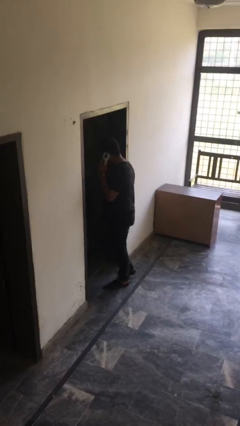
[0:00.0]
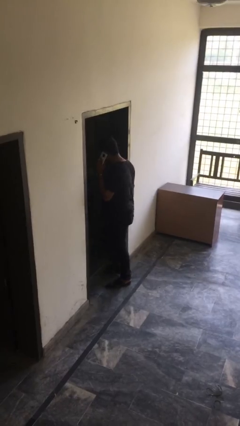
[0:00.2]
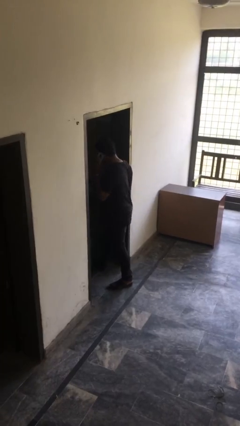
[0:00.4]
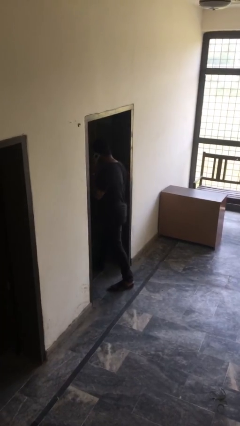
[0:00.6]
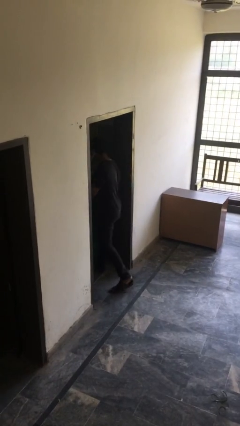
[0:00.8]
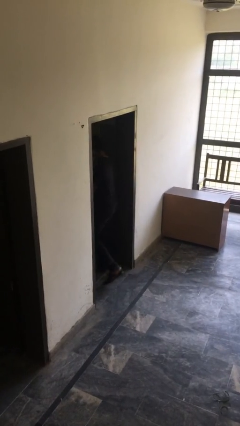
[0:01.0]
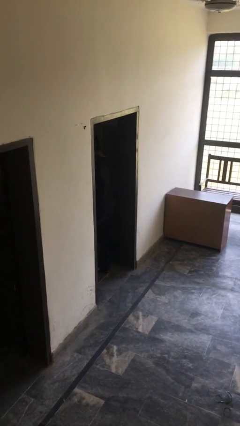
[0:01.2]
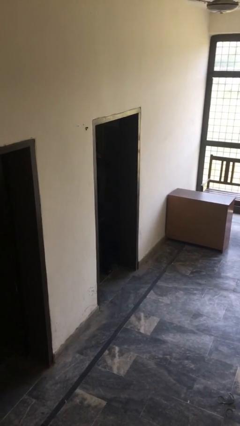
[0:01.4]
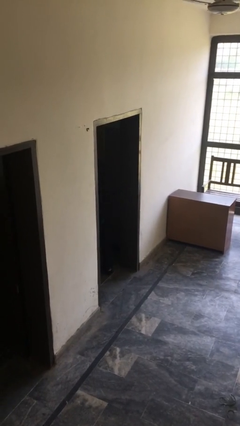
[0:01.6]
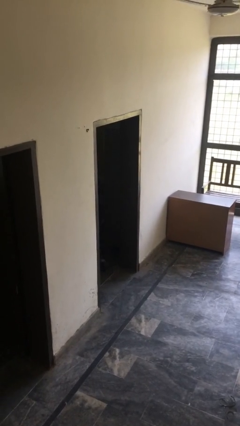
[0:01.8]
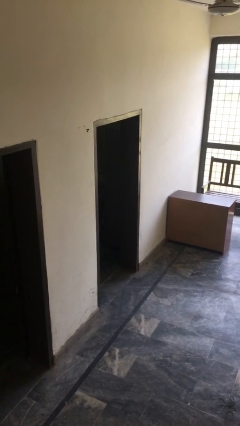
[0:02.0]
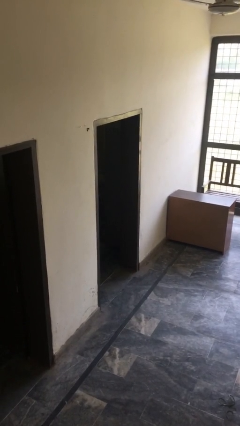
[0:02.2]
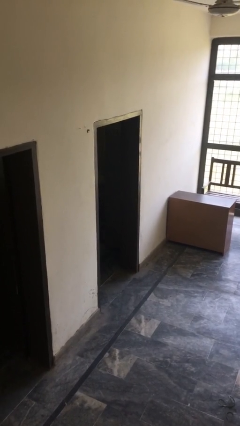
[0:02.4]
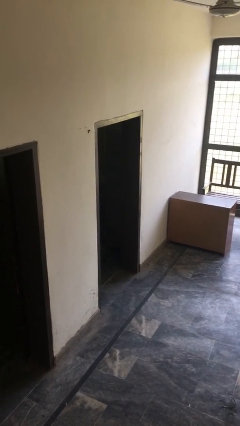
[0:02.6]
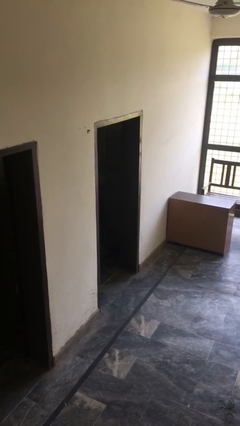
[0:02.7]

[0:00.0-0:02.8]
person exits scene through structure

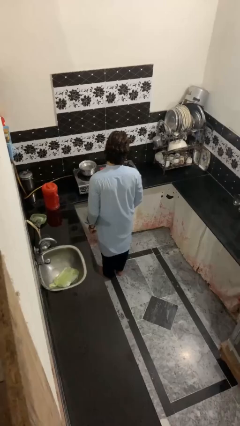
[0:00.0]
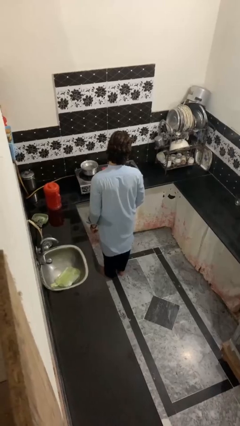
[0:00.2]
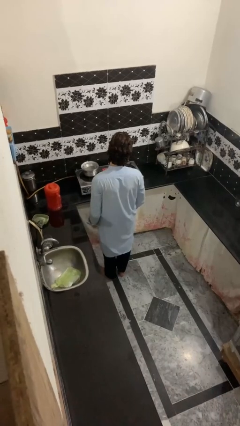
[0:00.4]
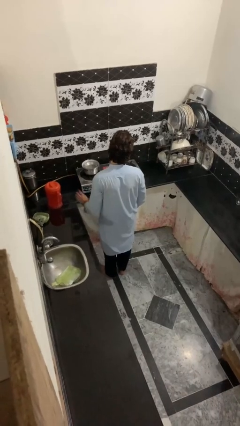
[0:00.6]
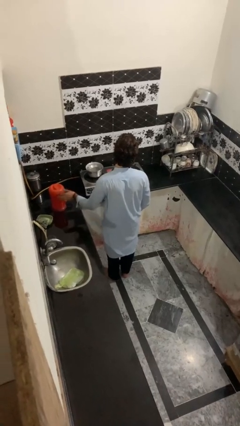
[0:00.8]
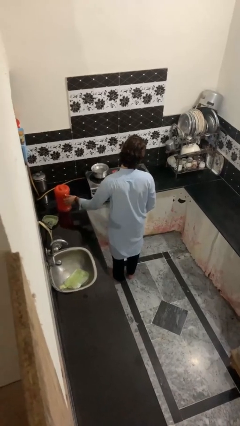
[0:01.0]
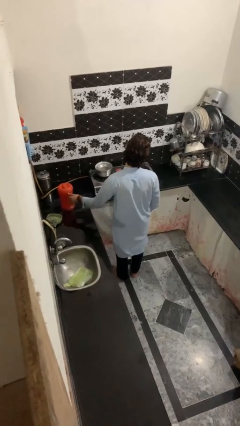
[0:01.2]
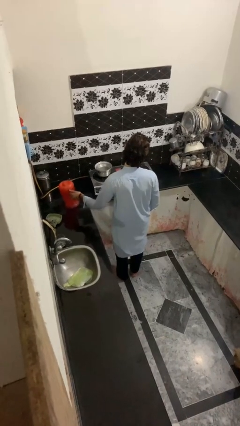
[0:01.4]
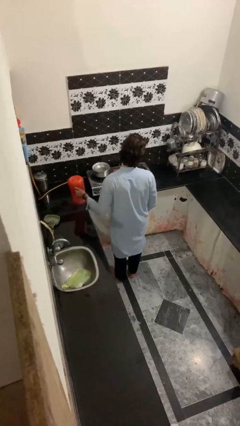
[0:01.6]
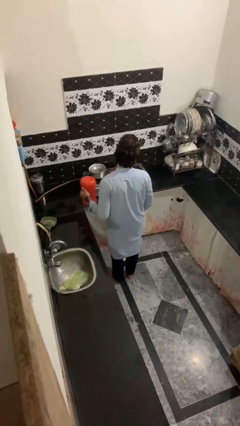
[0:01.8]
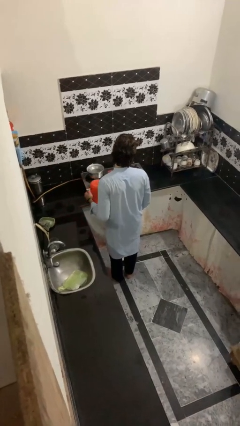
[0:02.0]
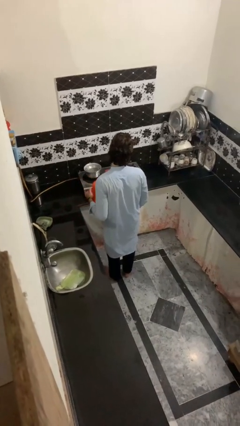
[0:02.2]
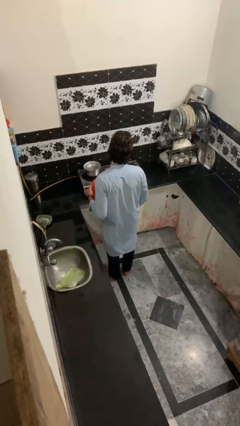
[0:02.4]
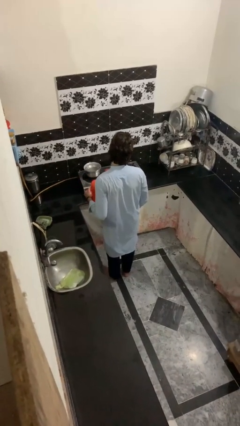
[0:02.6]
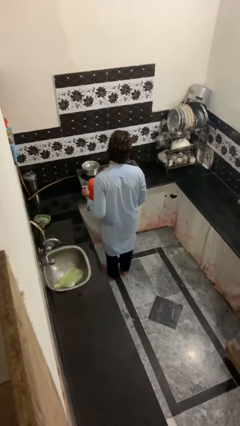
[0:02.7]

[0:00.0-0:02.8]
person picks up object from countertop

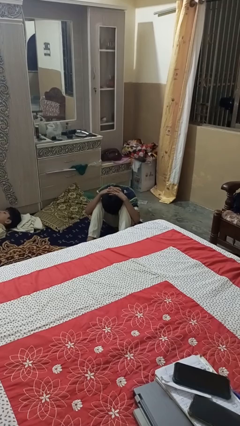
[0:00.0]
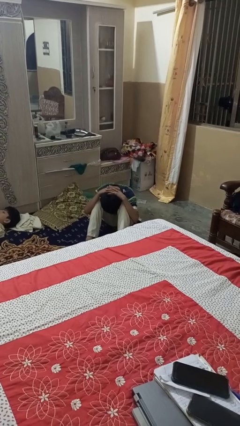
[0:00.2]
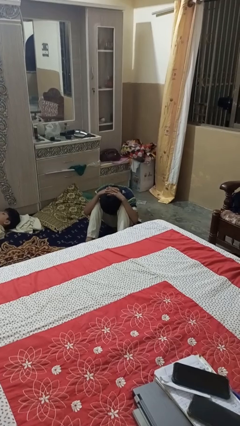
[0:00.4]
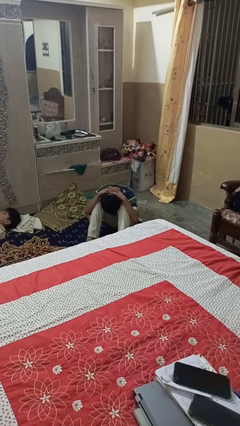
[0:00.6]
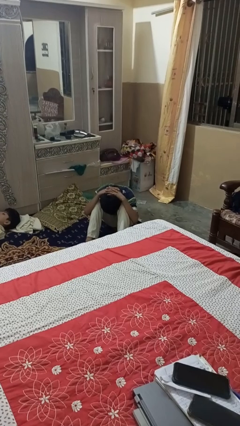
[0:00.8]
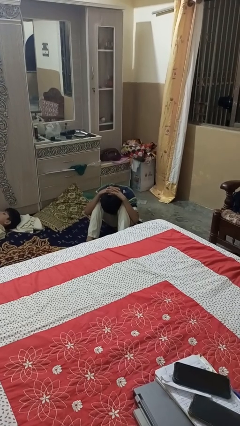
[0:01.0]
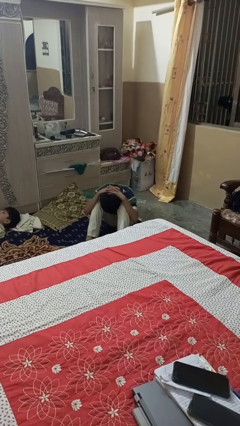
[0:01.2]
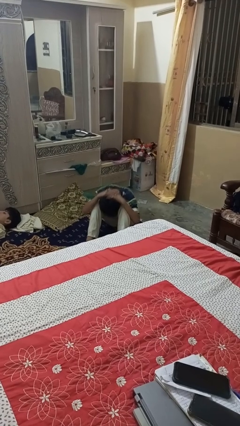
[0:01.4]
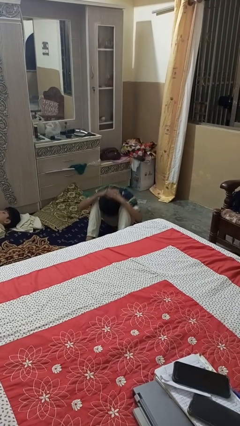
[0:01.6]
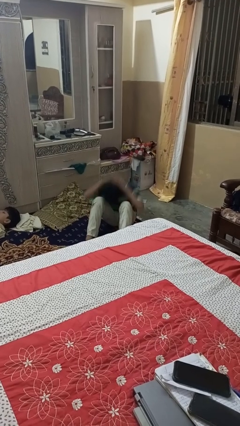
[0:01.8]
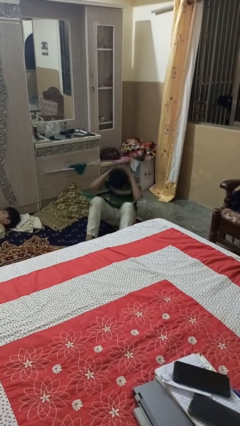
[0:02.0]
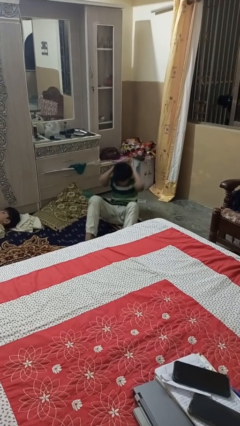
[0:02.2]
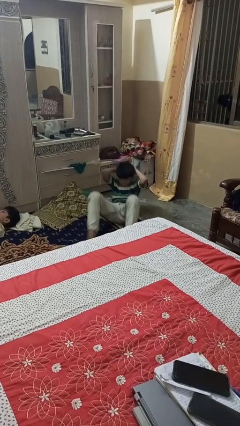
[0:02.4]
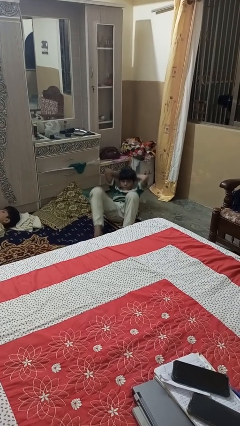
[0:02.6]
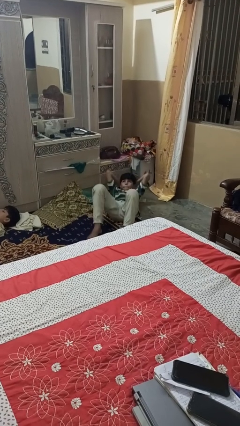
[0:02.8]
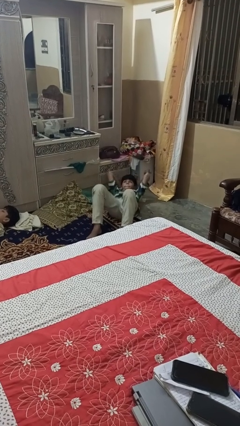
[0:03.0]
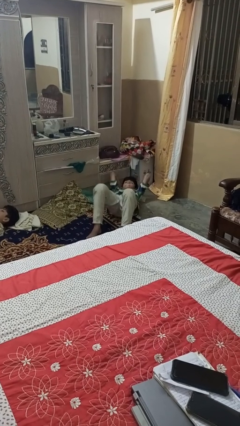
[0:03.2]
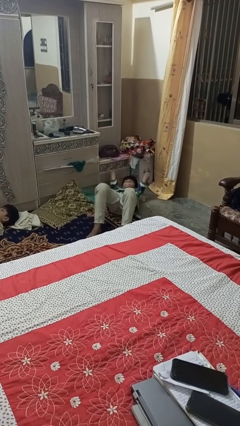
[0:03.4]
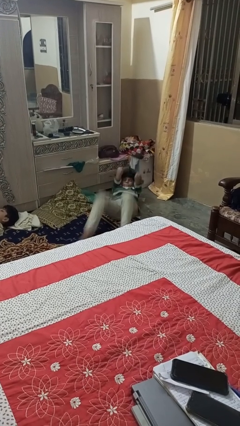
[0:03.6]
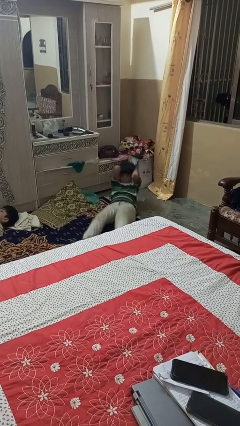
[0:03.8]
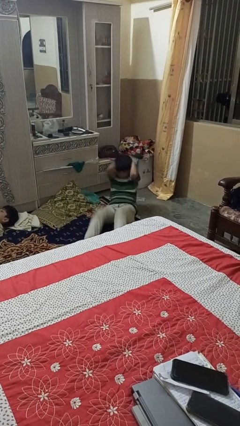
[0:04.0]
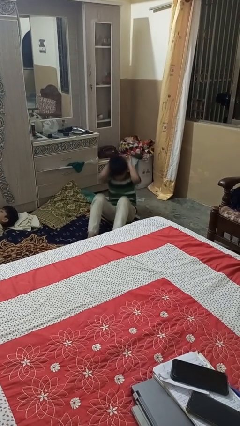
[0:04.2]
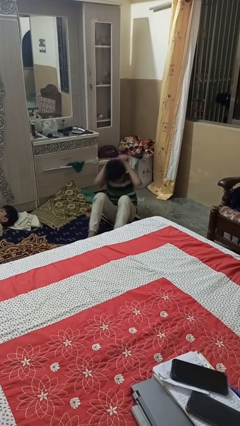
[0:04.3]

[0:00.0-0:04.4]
person exercises with situp

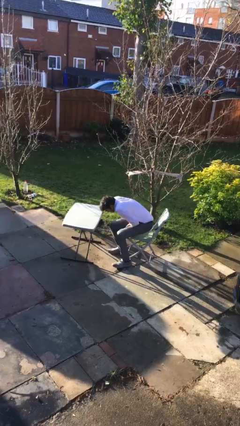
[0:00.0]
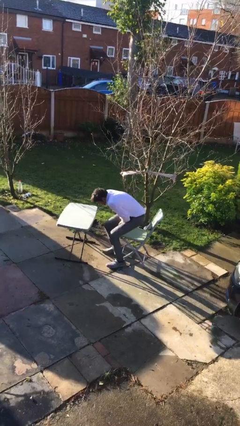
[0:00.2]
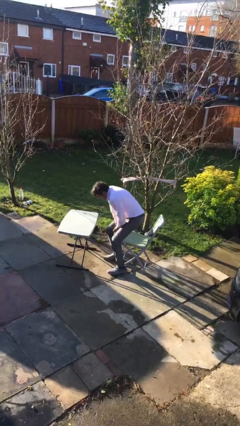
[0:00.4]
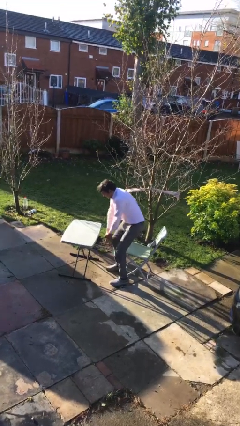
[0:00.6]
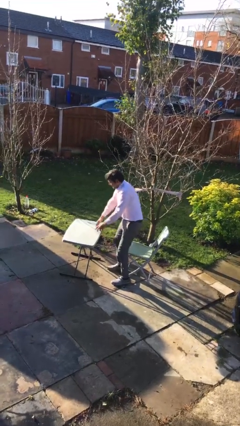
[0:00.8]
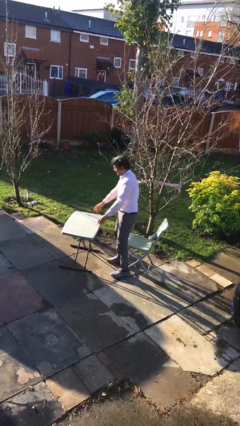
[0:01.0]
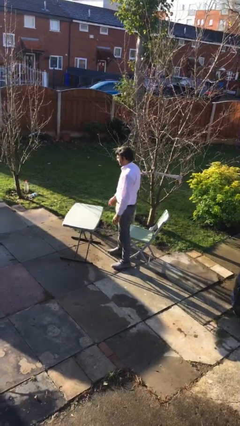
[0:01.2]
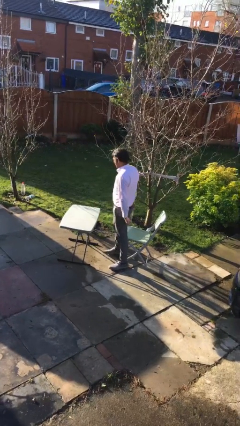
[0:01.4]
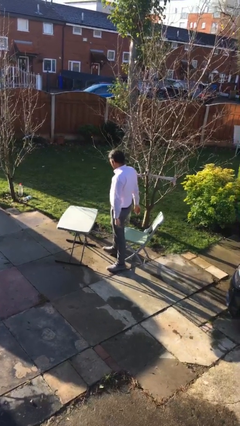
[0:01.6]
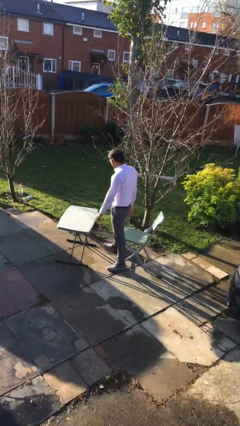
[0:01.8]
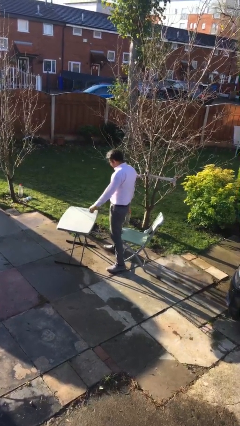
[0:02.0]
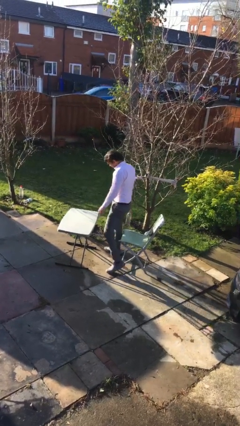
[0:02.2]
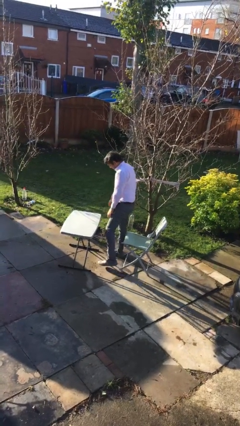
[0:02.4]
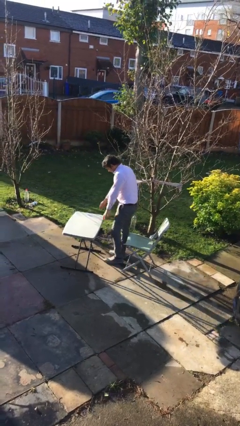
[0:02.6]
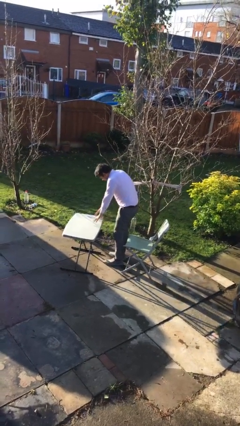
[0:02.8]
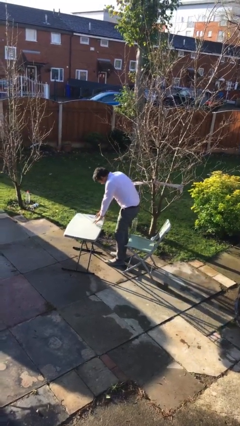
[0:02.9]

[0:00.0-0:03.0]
person stands up

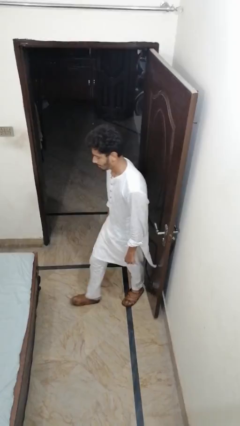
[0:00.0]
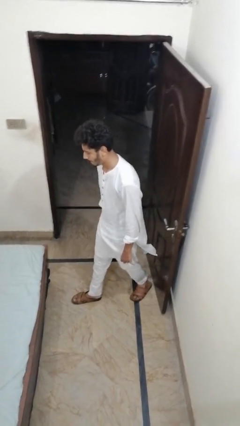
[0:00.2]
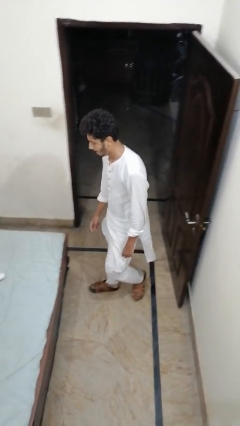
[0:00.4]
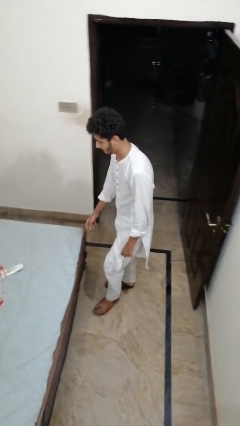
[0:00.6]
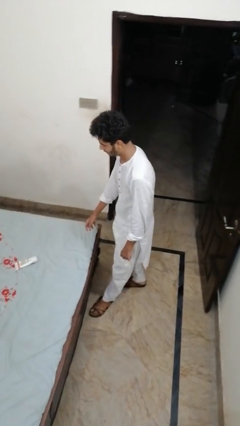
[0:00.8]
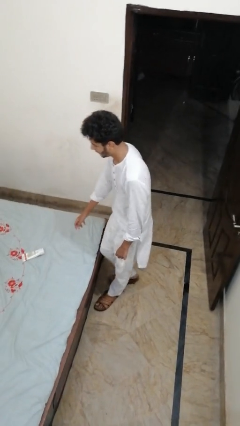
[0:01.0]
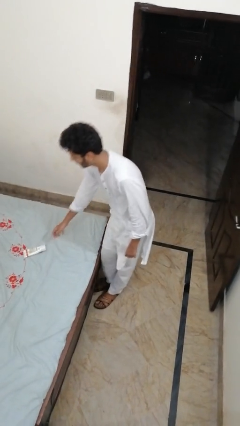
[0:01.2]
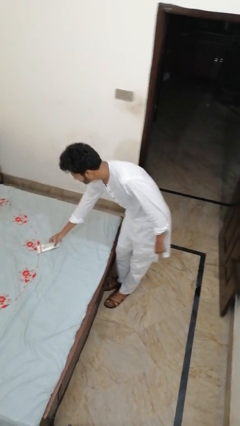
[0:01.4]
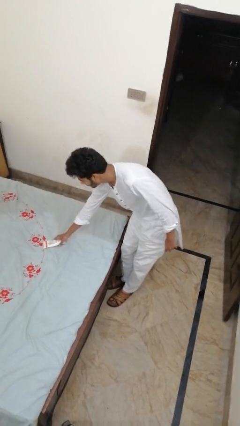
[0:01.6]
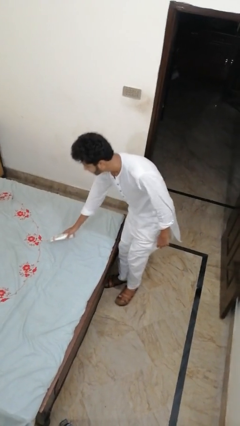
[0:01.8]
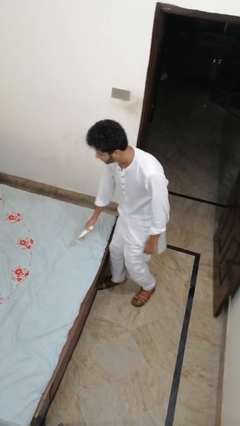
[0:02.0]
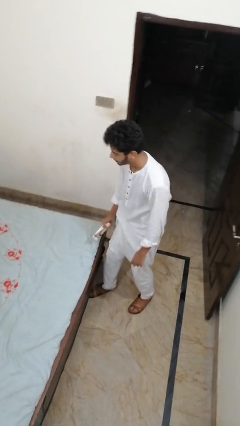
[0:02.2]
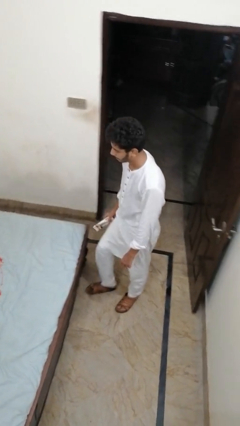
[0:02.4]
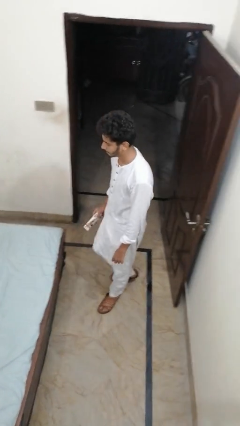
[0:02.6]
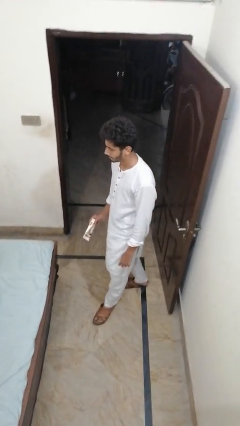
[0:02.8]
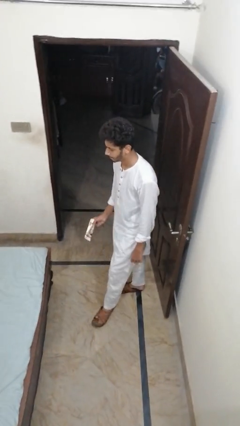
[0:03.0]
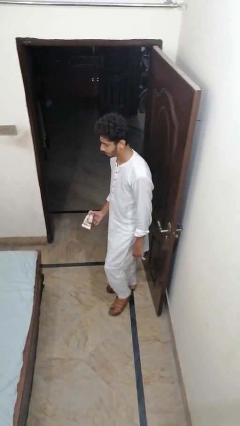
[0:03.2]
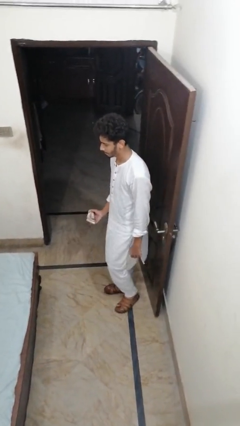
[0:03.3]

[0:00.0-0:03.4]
person picks up object from bed

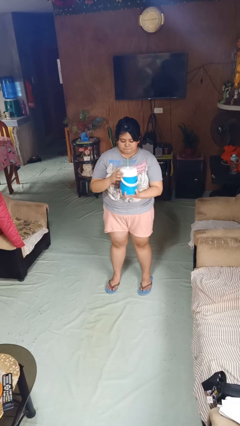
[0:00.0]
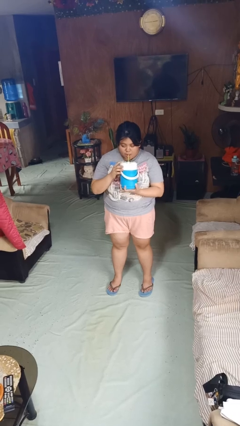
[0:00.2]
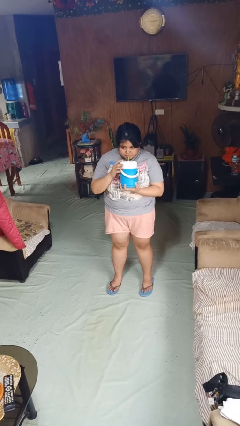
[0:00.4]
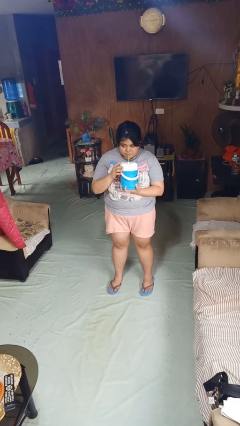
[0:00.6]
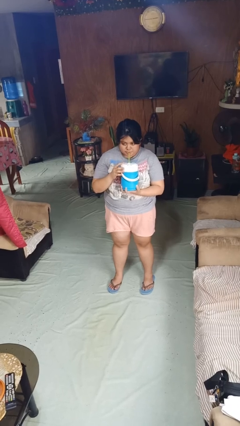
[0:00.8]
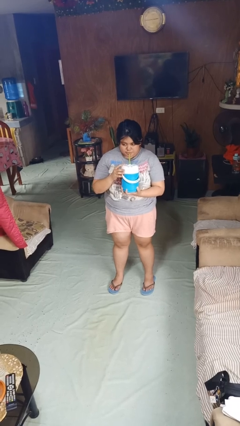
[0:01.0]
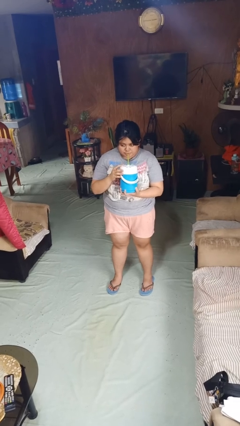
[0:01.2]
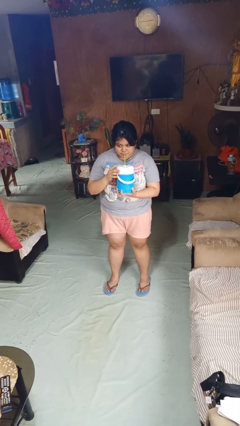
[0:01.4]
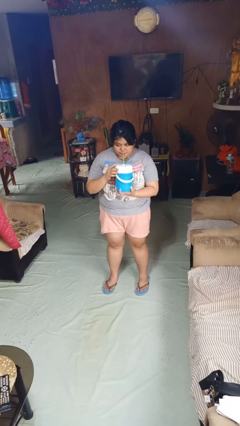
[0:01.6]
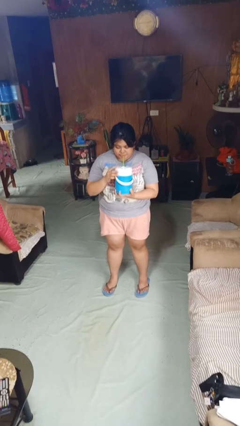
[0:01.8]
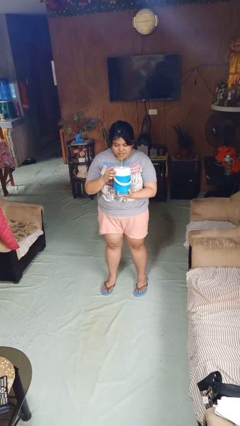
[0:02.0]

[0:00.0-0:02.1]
person drinks from straw
